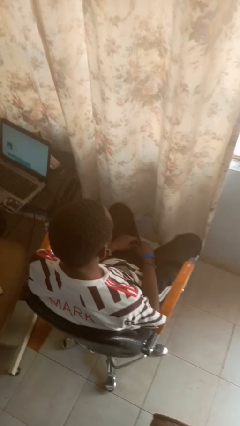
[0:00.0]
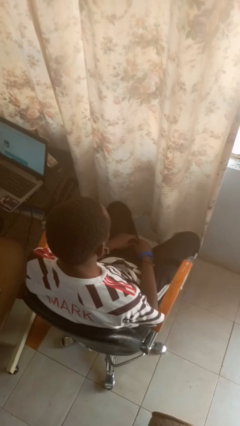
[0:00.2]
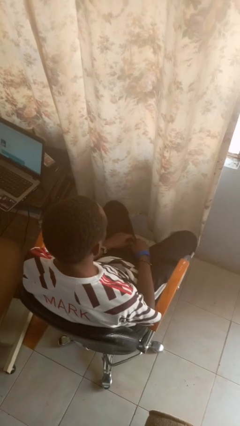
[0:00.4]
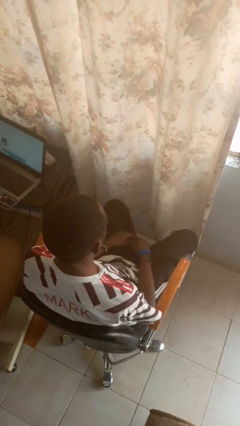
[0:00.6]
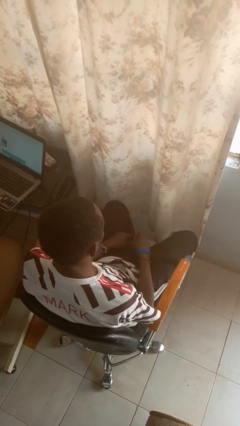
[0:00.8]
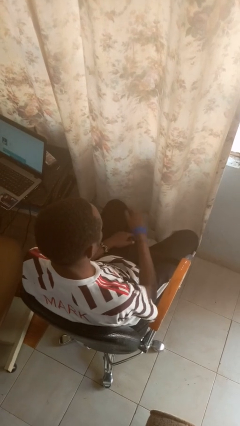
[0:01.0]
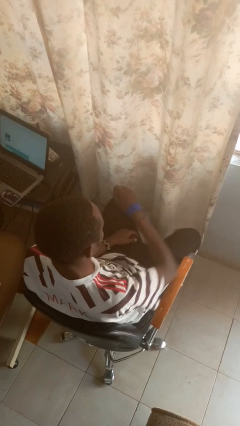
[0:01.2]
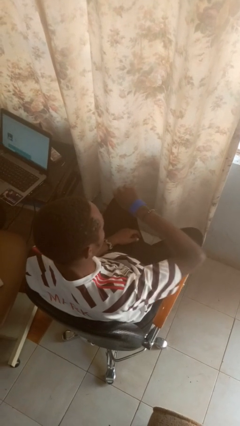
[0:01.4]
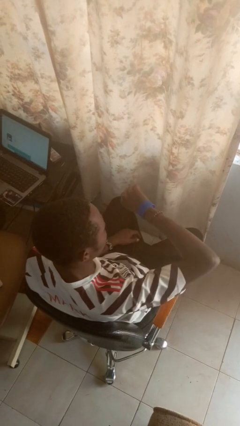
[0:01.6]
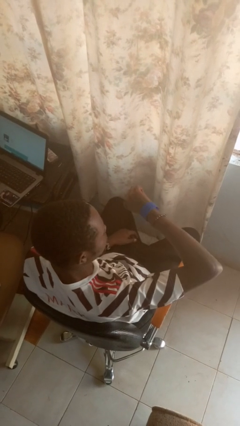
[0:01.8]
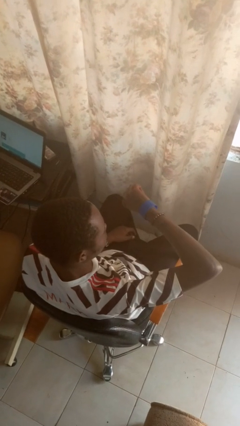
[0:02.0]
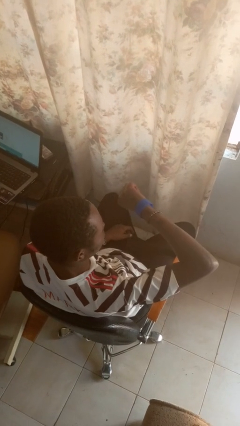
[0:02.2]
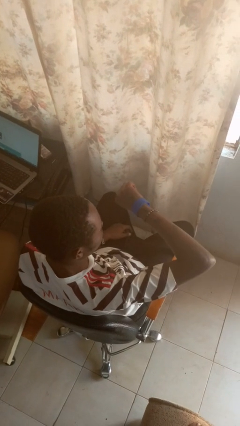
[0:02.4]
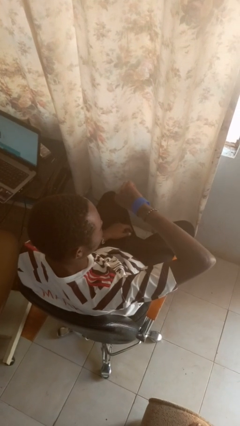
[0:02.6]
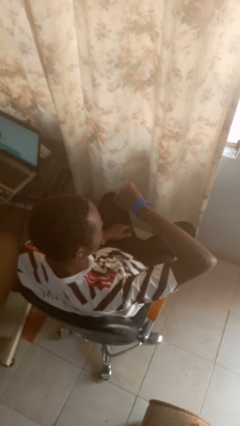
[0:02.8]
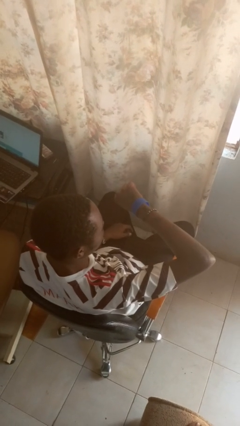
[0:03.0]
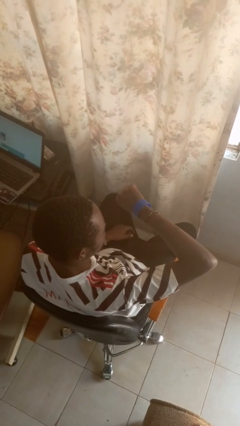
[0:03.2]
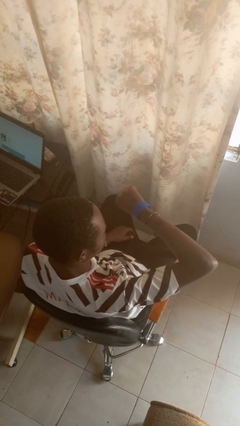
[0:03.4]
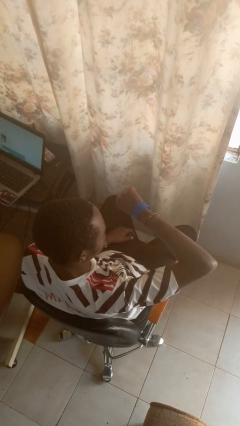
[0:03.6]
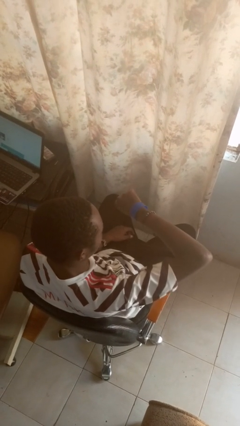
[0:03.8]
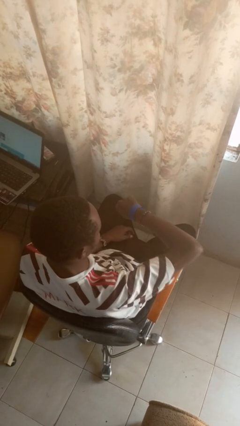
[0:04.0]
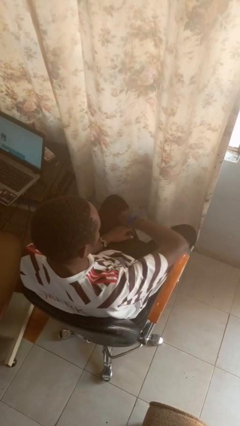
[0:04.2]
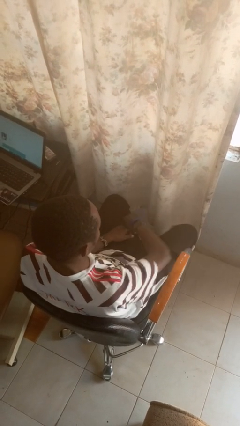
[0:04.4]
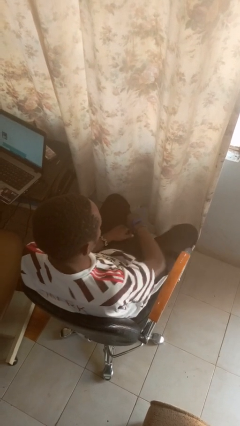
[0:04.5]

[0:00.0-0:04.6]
person looks at wristwatch

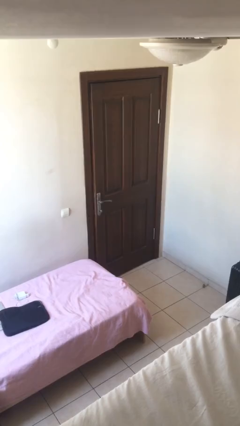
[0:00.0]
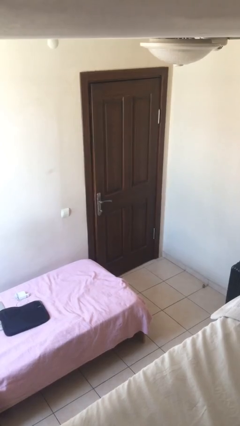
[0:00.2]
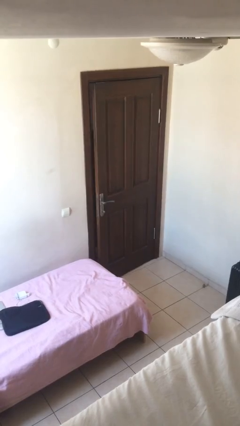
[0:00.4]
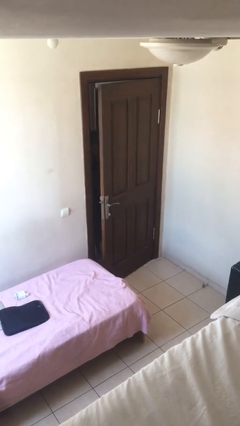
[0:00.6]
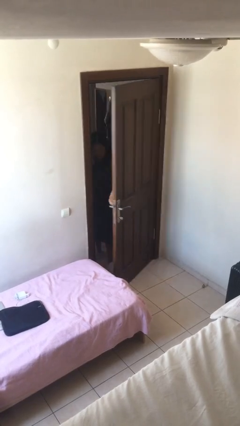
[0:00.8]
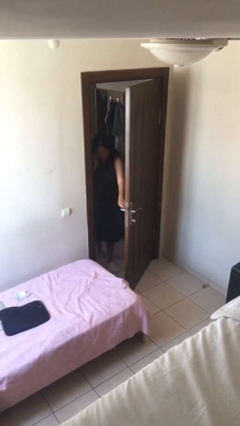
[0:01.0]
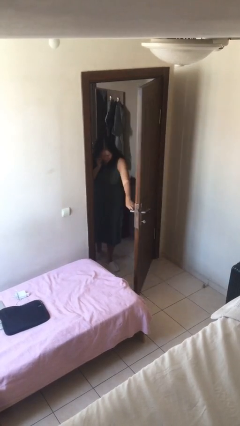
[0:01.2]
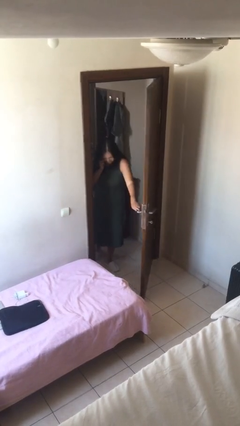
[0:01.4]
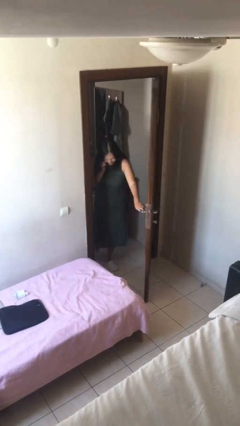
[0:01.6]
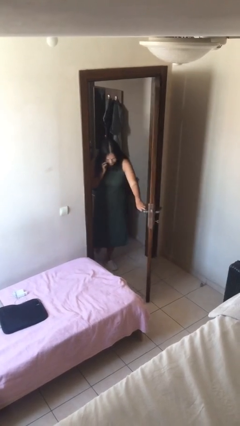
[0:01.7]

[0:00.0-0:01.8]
person opens facility door

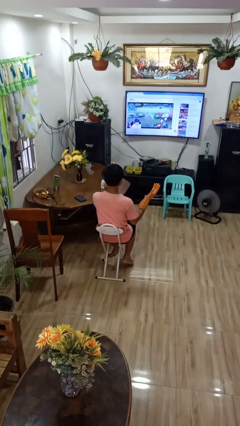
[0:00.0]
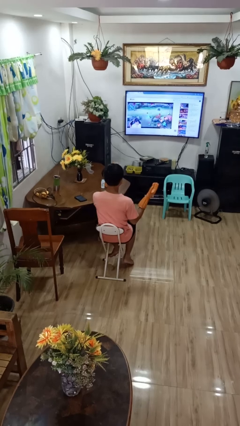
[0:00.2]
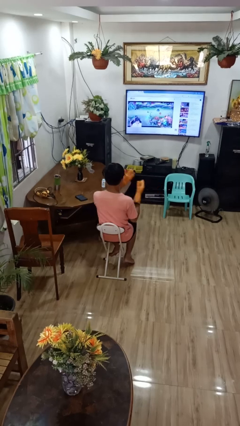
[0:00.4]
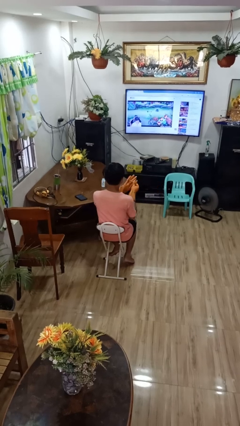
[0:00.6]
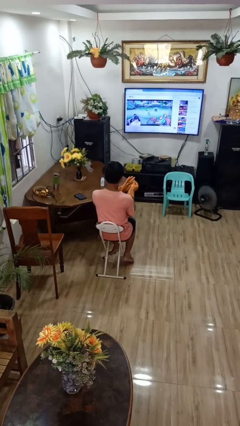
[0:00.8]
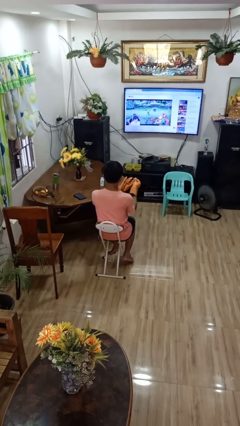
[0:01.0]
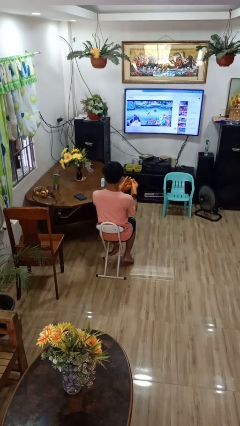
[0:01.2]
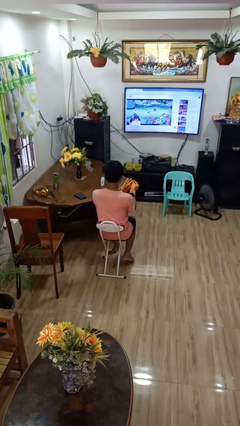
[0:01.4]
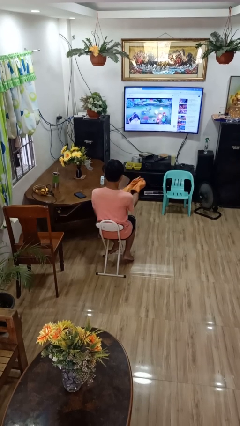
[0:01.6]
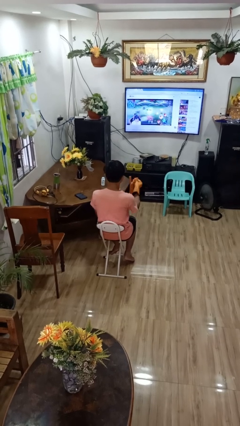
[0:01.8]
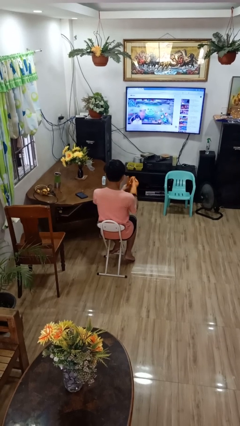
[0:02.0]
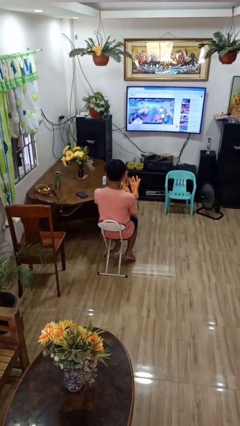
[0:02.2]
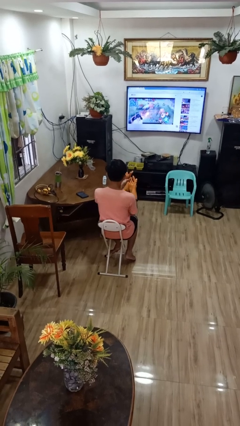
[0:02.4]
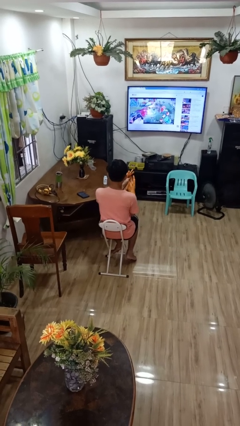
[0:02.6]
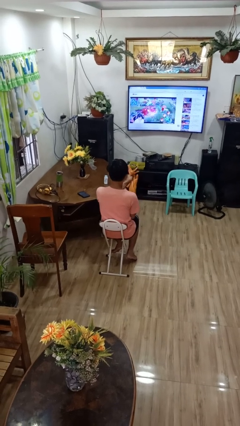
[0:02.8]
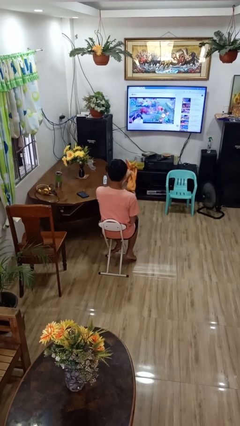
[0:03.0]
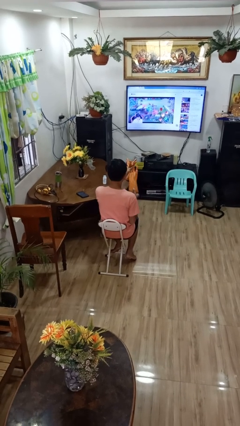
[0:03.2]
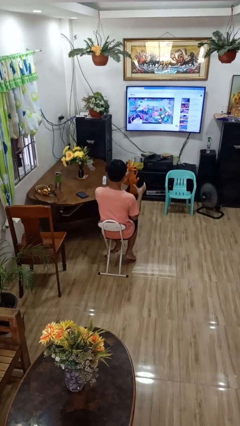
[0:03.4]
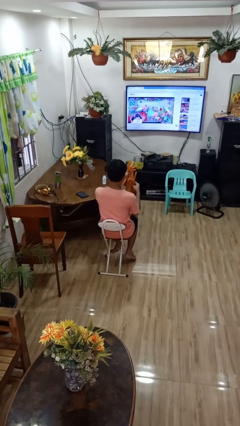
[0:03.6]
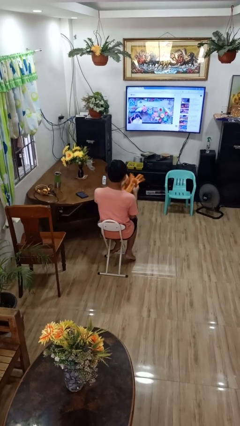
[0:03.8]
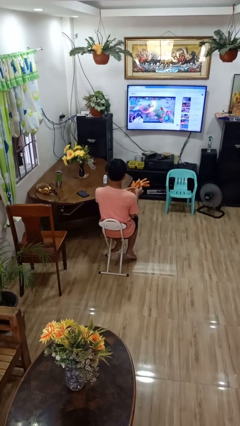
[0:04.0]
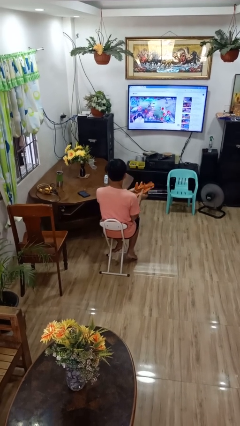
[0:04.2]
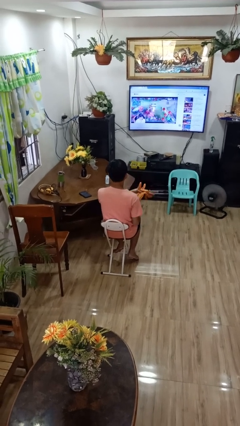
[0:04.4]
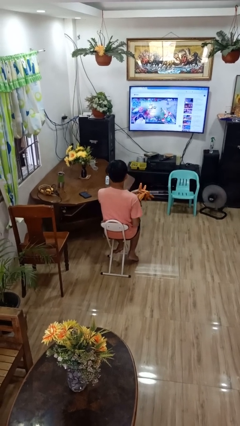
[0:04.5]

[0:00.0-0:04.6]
person takes off gloves

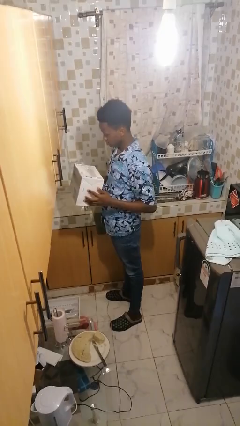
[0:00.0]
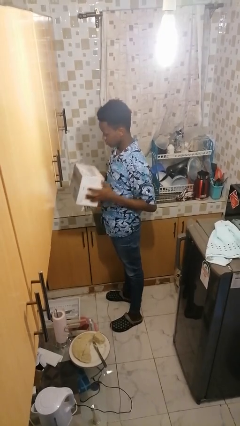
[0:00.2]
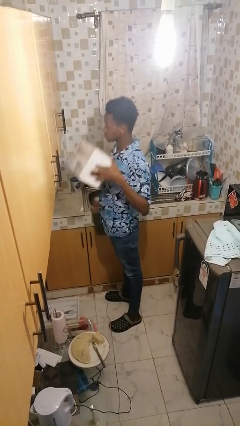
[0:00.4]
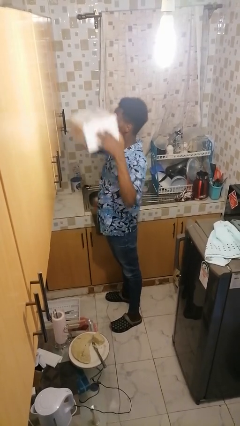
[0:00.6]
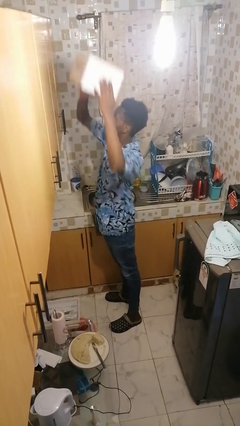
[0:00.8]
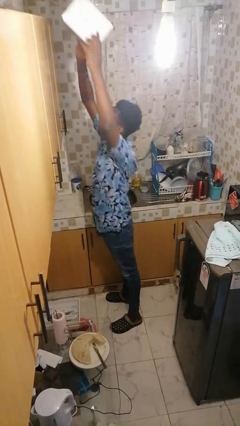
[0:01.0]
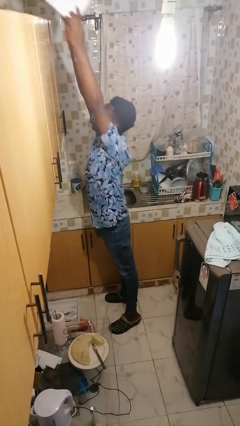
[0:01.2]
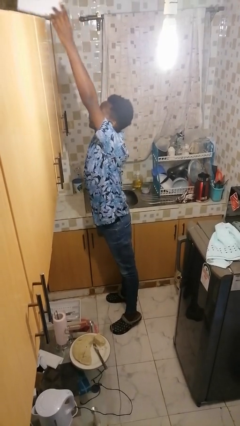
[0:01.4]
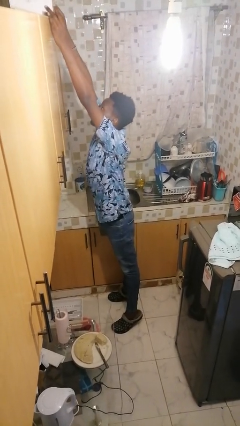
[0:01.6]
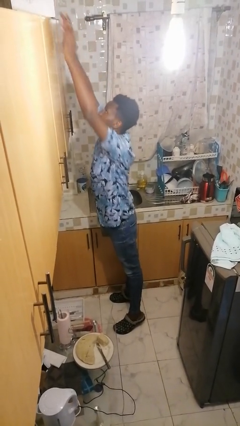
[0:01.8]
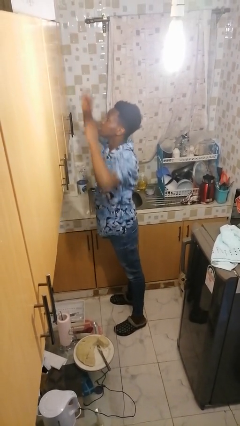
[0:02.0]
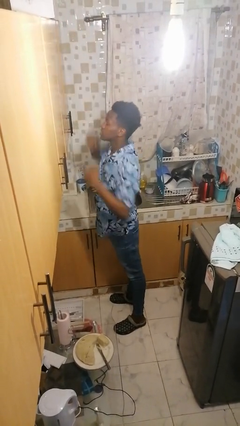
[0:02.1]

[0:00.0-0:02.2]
person puts down object on shelf

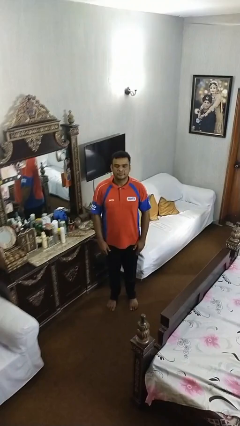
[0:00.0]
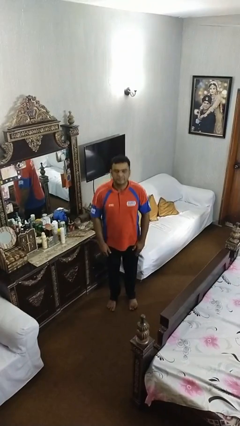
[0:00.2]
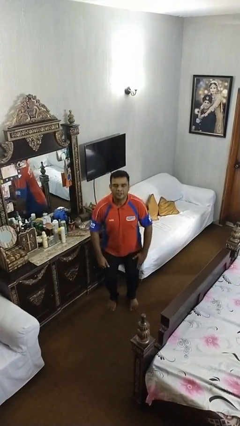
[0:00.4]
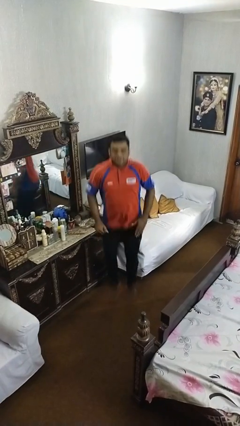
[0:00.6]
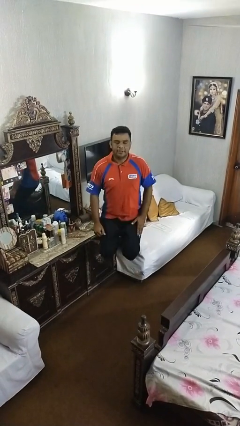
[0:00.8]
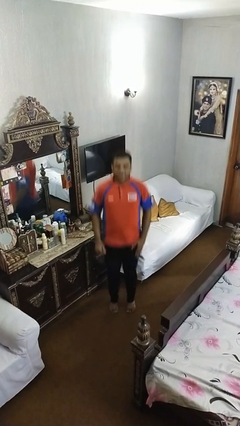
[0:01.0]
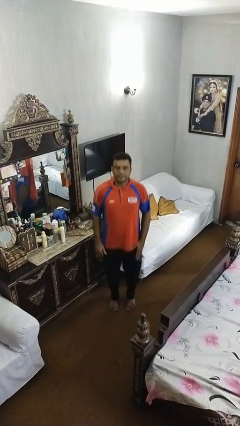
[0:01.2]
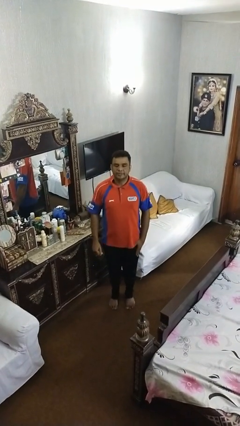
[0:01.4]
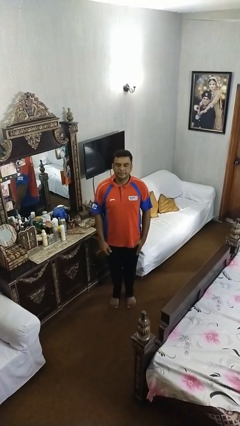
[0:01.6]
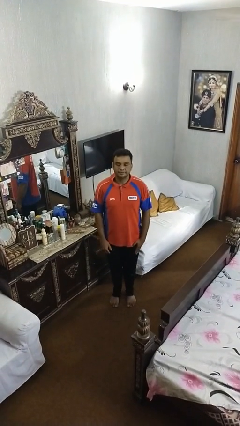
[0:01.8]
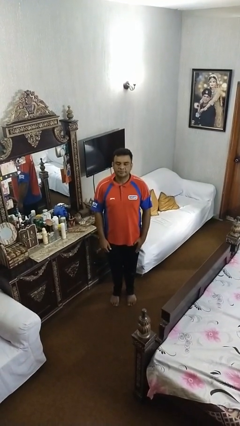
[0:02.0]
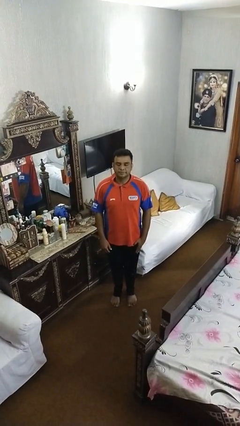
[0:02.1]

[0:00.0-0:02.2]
person jumps

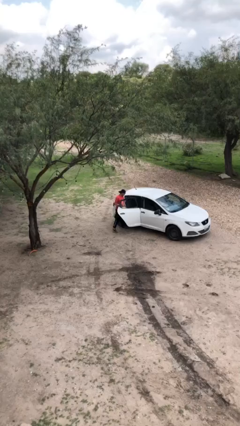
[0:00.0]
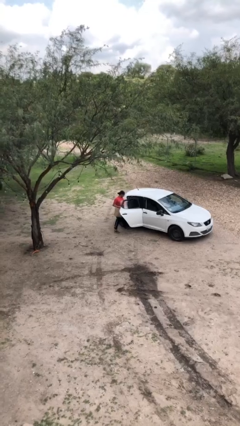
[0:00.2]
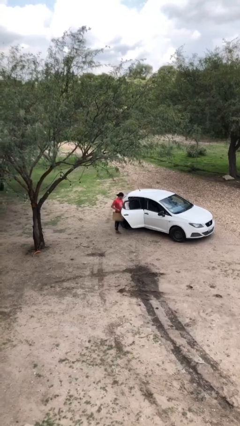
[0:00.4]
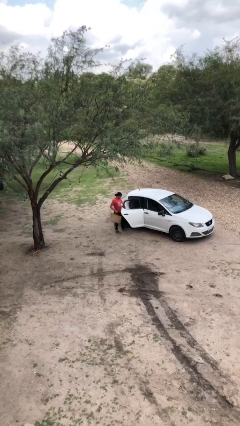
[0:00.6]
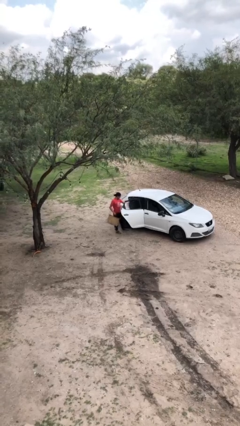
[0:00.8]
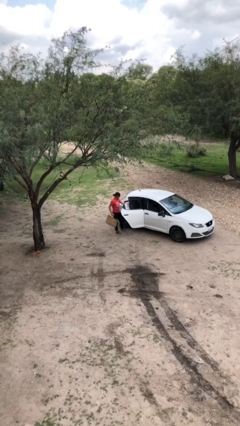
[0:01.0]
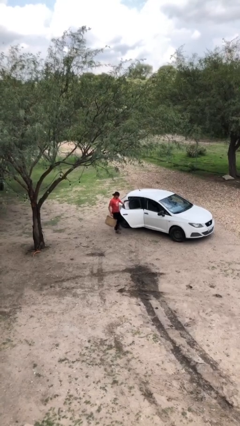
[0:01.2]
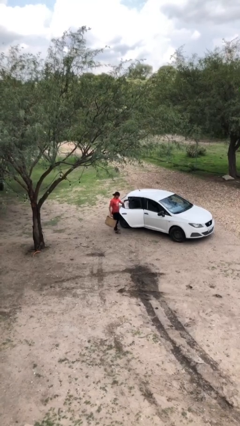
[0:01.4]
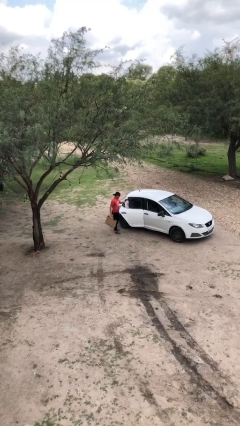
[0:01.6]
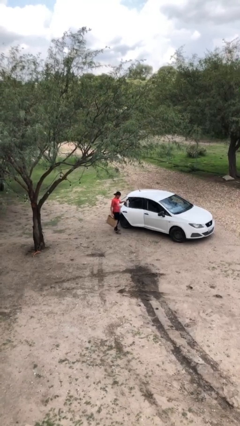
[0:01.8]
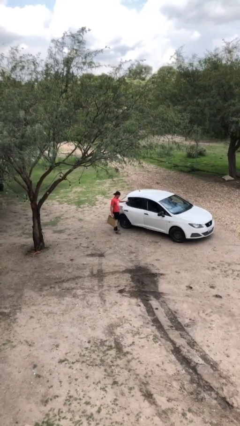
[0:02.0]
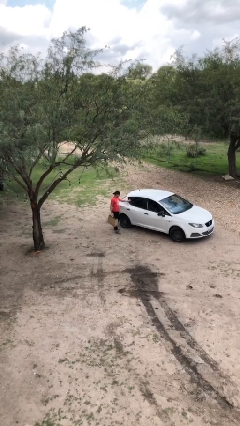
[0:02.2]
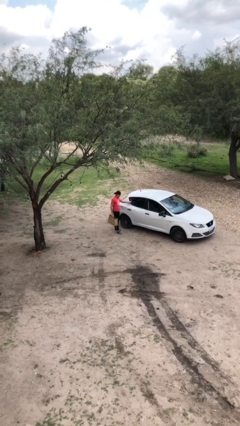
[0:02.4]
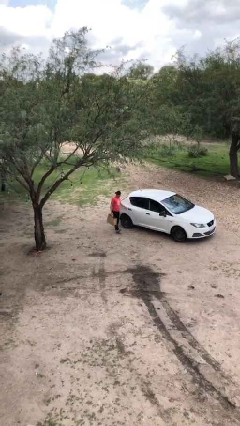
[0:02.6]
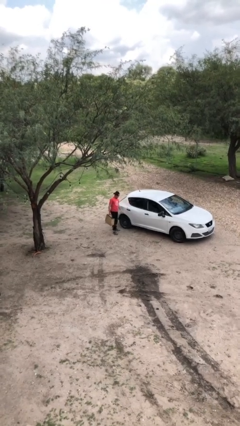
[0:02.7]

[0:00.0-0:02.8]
person closes car door
